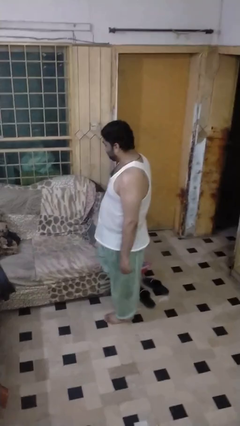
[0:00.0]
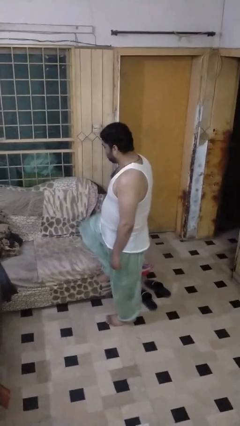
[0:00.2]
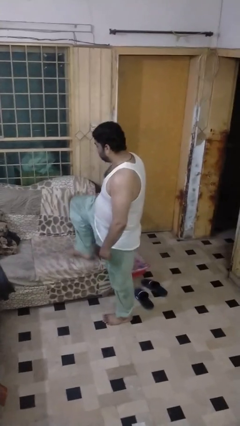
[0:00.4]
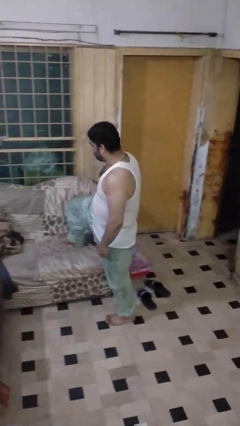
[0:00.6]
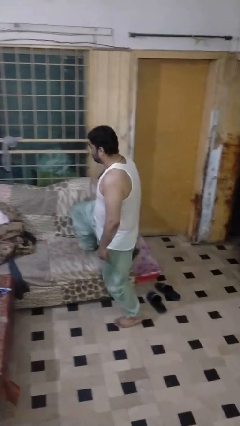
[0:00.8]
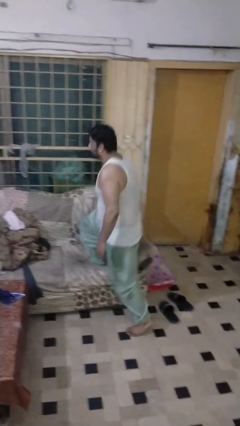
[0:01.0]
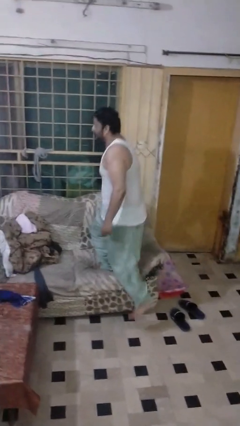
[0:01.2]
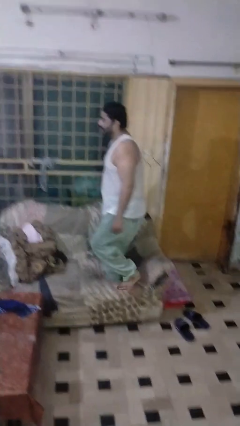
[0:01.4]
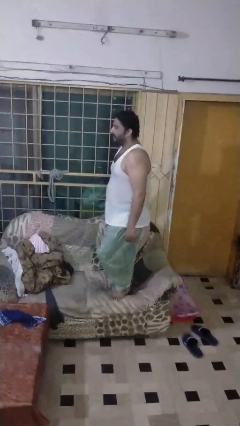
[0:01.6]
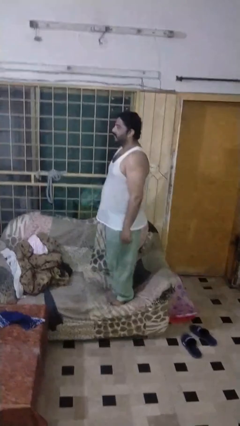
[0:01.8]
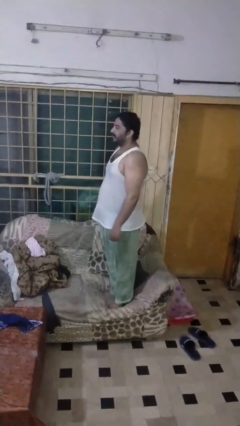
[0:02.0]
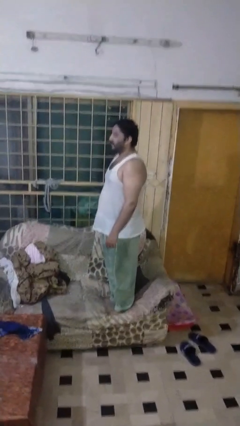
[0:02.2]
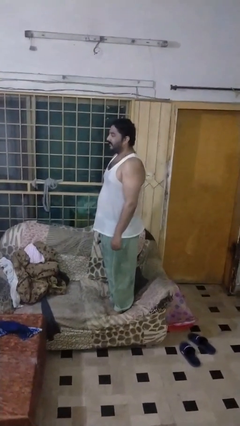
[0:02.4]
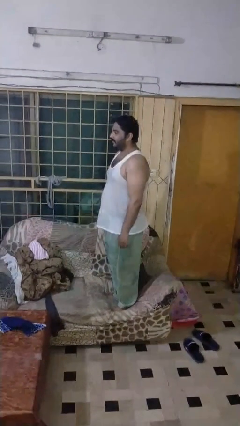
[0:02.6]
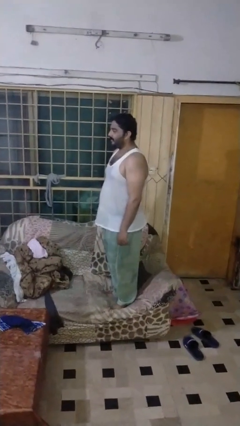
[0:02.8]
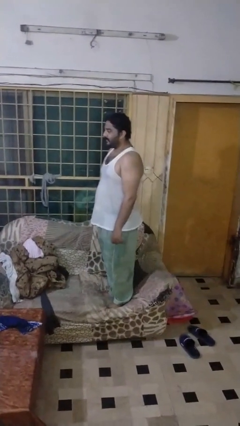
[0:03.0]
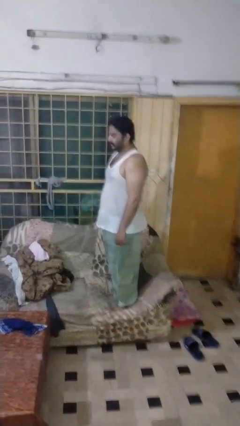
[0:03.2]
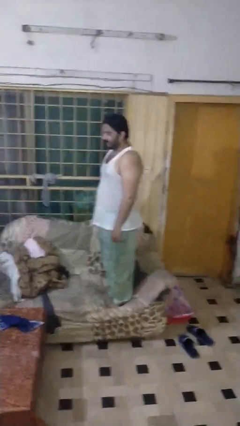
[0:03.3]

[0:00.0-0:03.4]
person climbs on couch

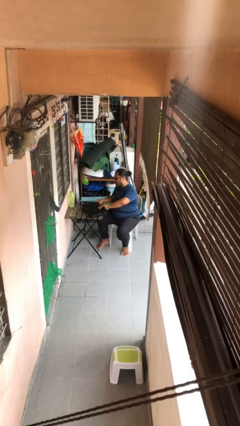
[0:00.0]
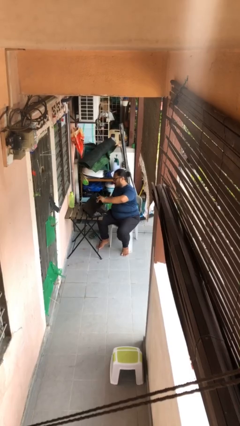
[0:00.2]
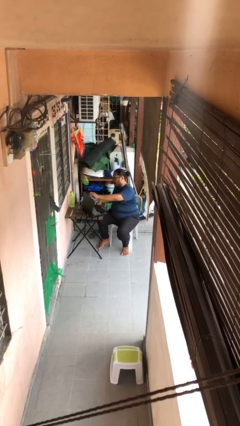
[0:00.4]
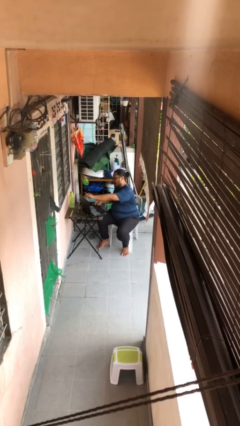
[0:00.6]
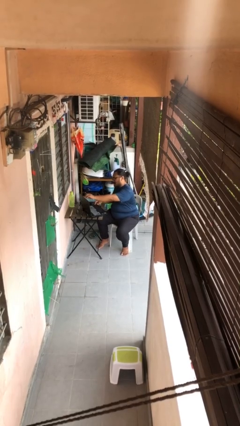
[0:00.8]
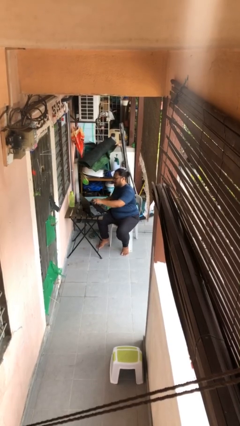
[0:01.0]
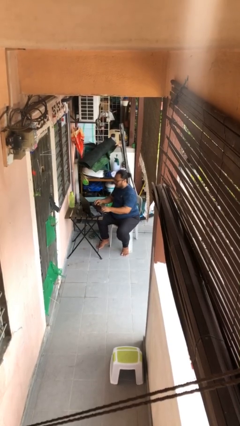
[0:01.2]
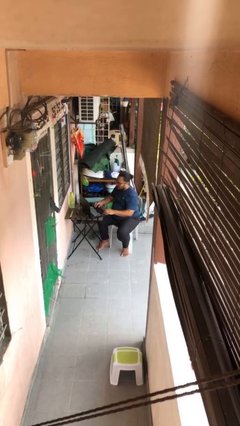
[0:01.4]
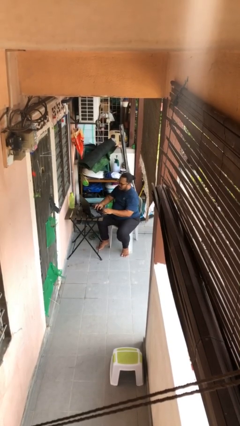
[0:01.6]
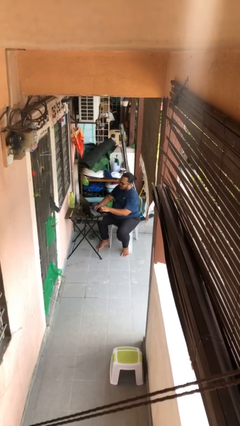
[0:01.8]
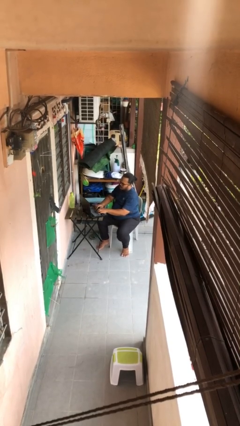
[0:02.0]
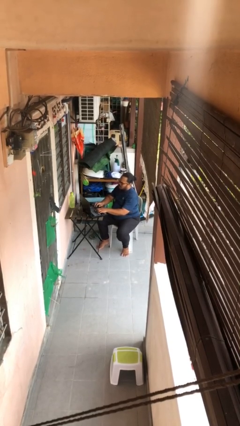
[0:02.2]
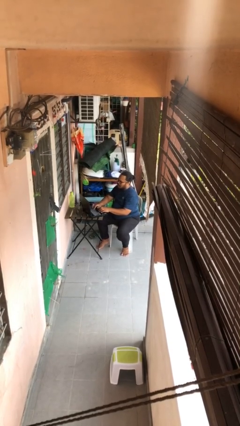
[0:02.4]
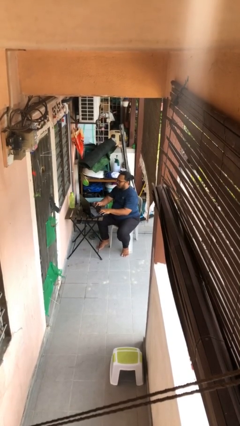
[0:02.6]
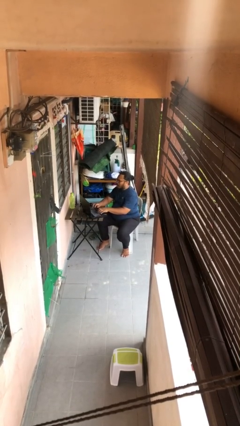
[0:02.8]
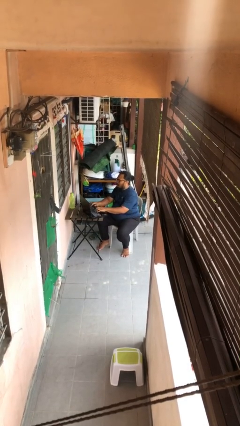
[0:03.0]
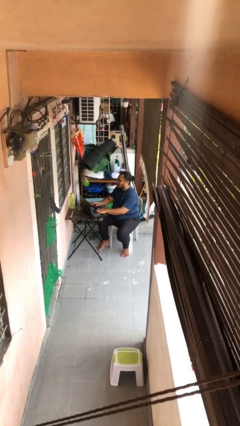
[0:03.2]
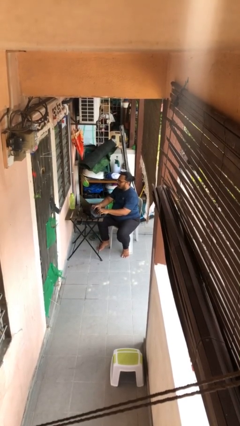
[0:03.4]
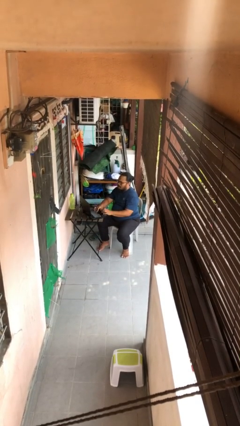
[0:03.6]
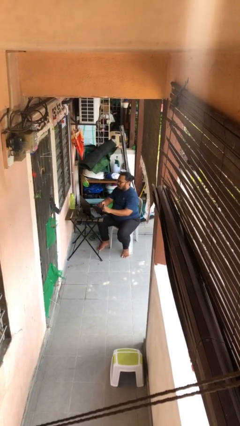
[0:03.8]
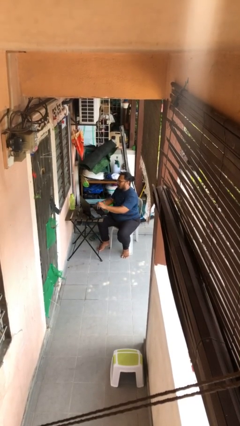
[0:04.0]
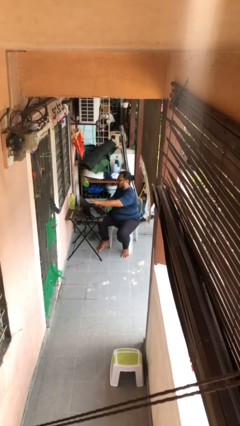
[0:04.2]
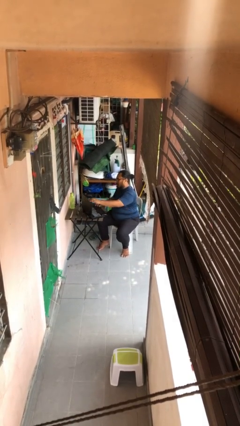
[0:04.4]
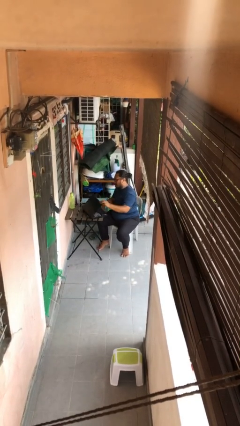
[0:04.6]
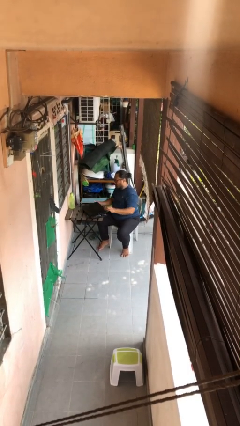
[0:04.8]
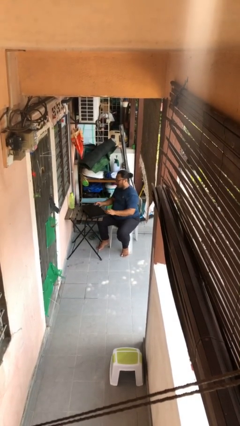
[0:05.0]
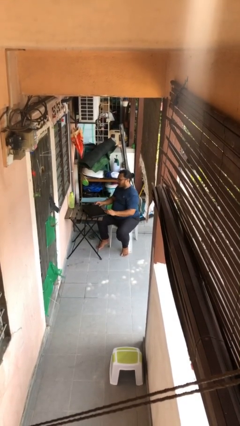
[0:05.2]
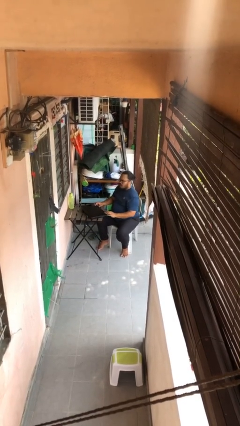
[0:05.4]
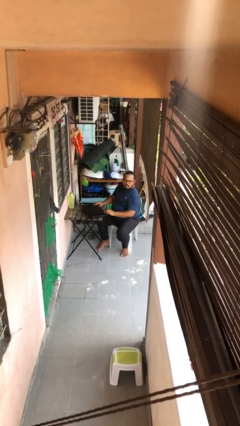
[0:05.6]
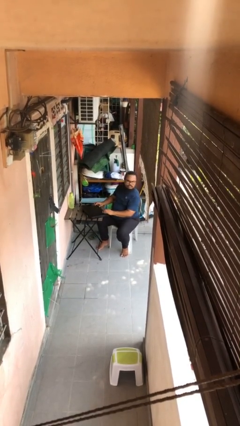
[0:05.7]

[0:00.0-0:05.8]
person interacts with laptop

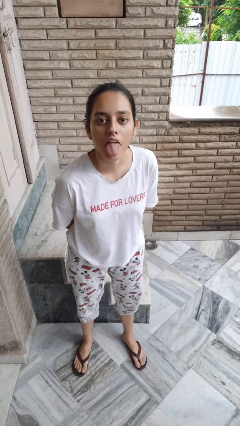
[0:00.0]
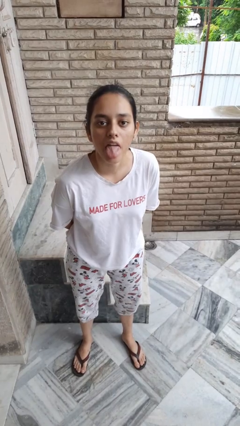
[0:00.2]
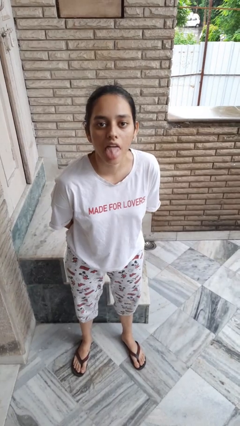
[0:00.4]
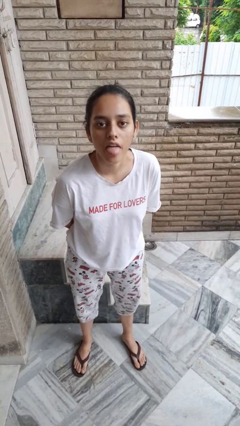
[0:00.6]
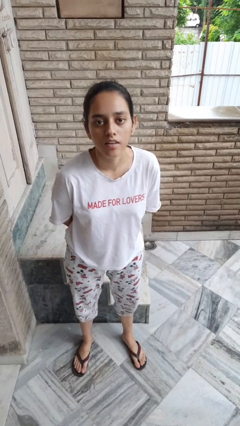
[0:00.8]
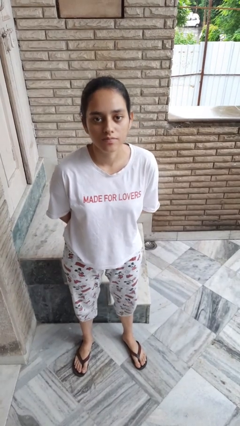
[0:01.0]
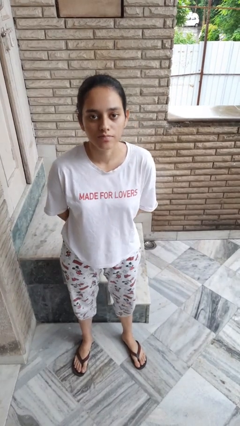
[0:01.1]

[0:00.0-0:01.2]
person sticks out tongue

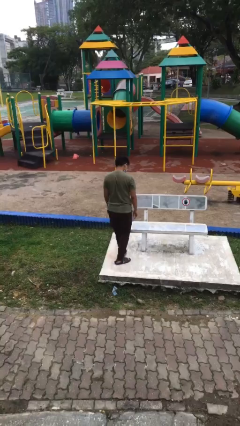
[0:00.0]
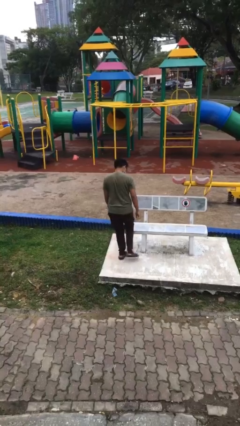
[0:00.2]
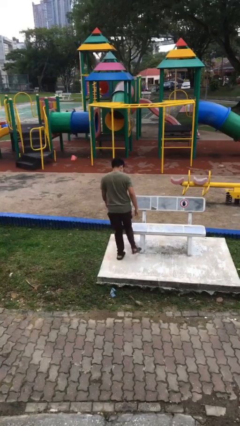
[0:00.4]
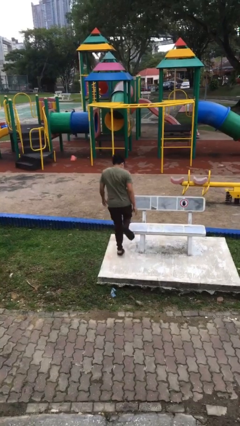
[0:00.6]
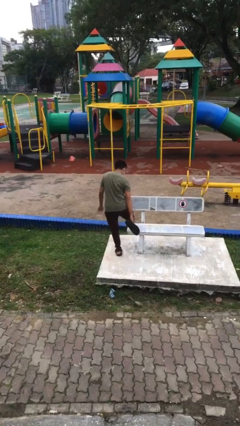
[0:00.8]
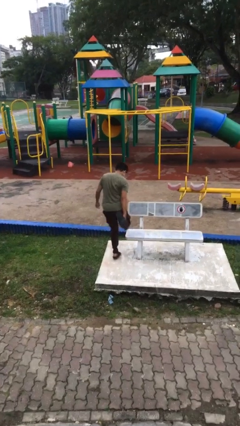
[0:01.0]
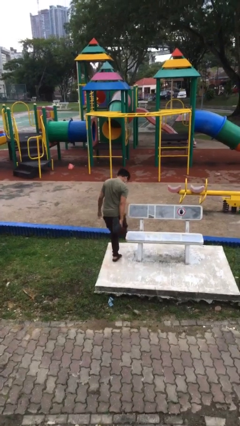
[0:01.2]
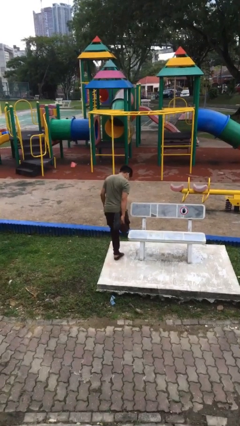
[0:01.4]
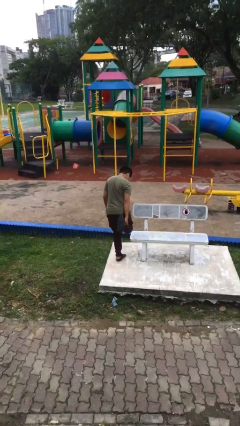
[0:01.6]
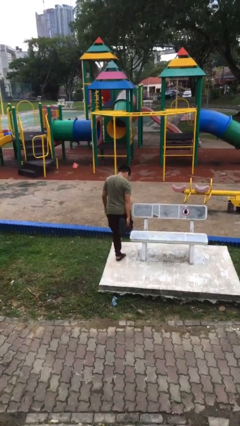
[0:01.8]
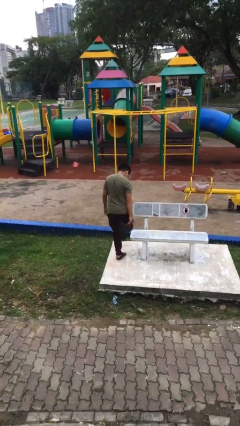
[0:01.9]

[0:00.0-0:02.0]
person stubs toe

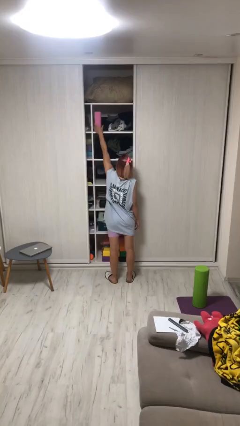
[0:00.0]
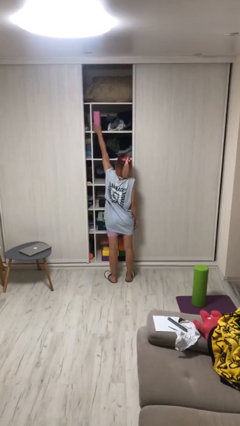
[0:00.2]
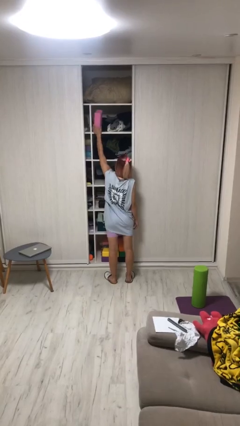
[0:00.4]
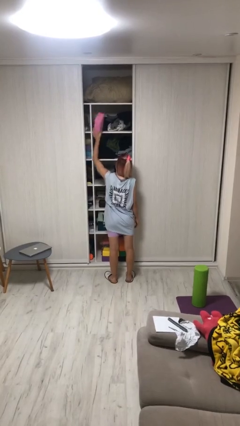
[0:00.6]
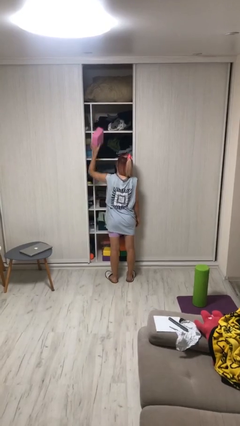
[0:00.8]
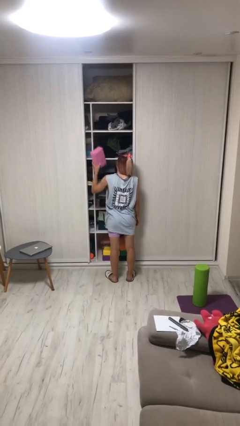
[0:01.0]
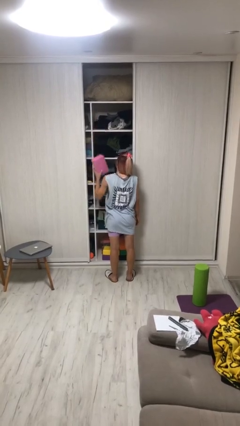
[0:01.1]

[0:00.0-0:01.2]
person picks up object from shelf

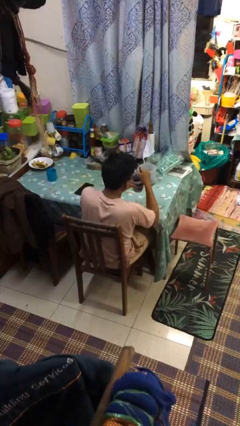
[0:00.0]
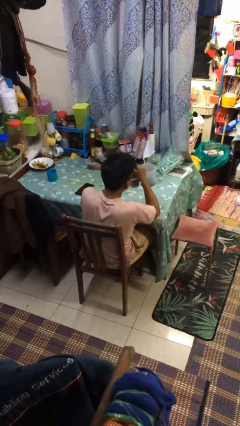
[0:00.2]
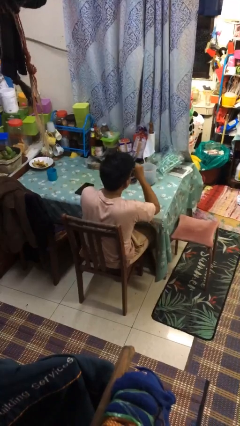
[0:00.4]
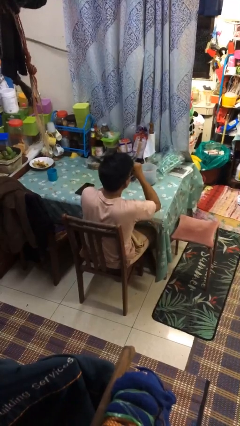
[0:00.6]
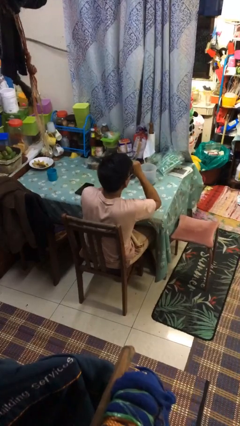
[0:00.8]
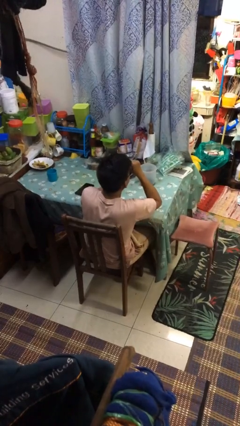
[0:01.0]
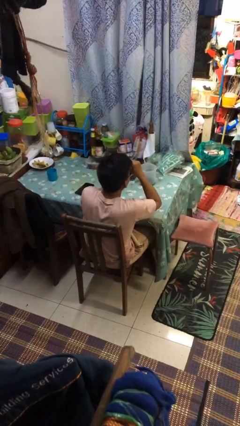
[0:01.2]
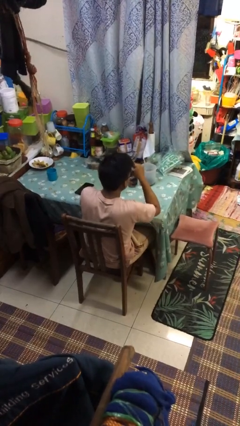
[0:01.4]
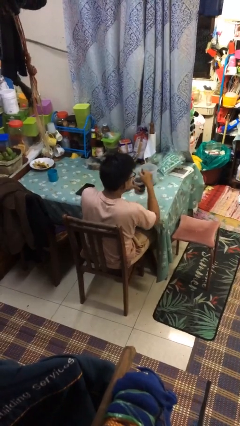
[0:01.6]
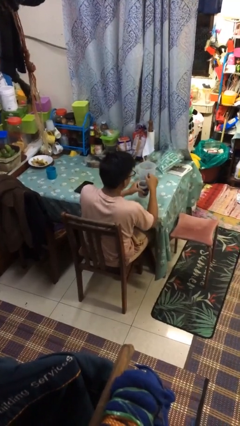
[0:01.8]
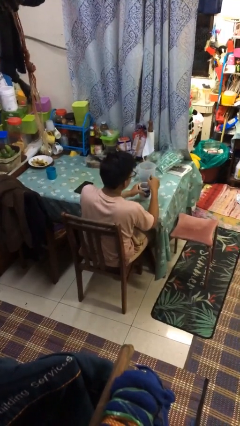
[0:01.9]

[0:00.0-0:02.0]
person drinks from mug

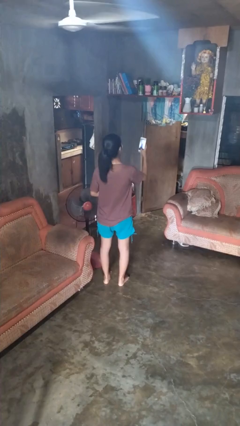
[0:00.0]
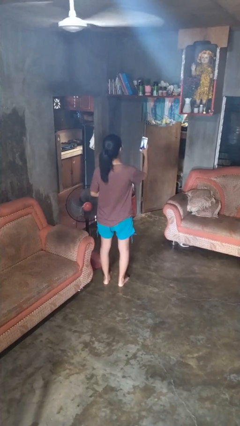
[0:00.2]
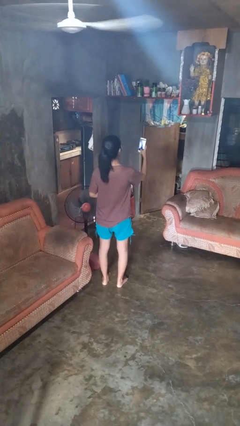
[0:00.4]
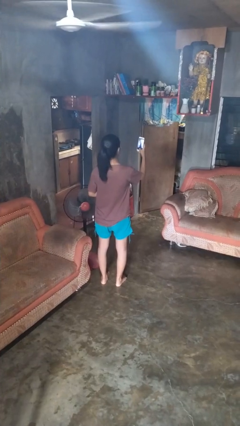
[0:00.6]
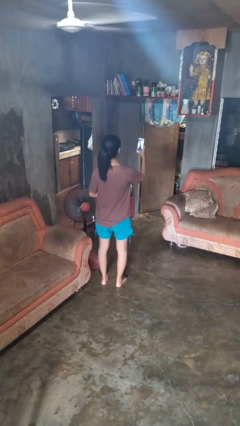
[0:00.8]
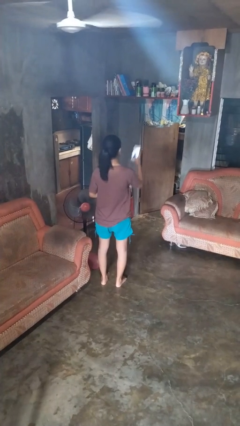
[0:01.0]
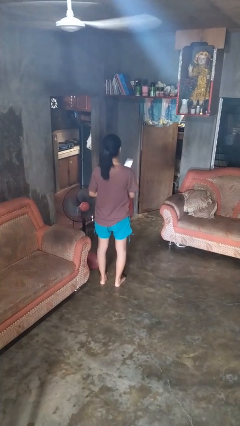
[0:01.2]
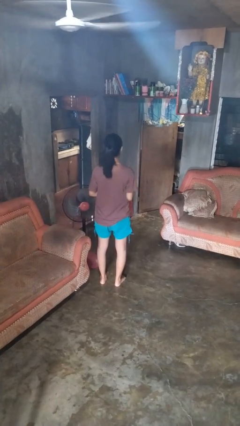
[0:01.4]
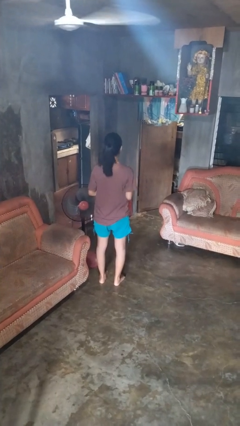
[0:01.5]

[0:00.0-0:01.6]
person takes selfie
